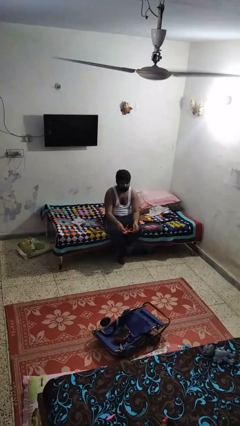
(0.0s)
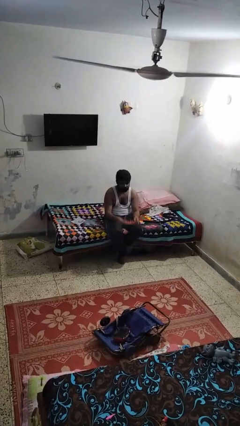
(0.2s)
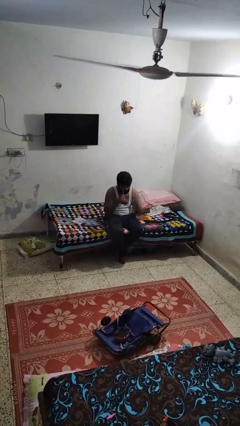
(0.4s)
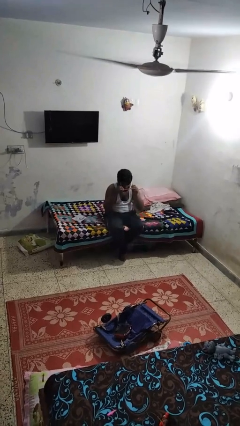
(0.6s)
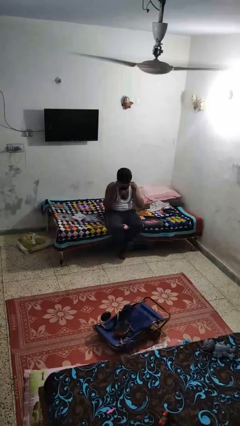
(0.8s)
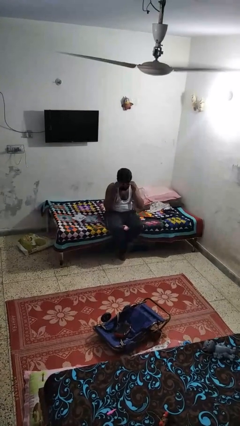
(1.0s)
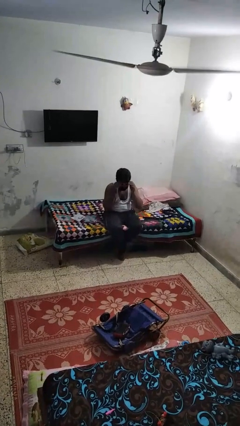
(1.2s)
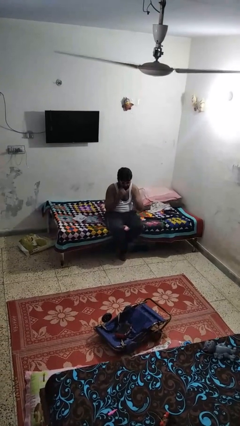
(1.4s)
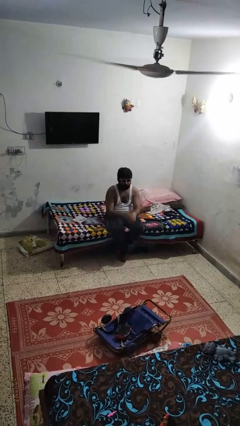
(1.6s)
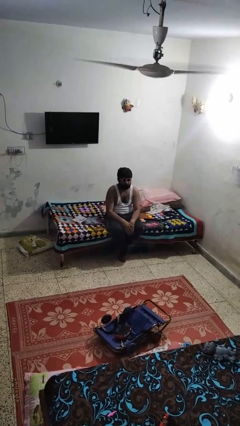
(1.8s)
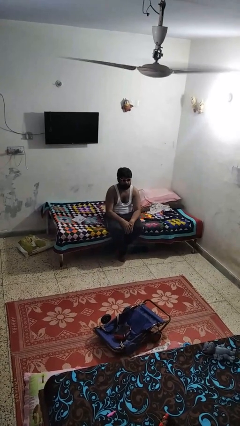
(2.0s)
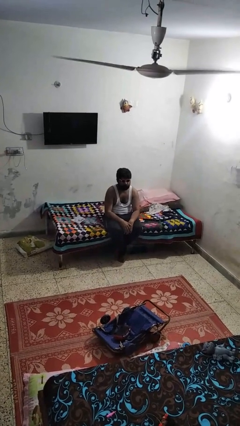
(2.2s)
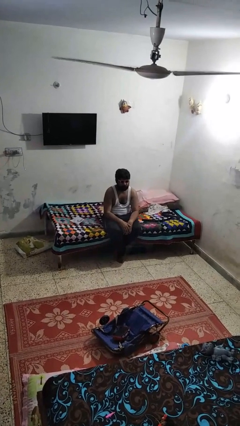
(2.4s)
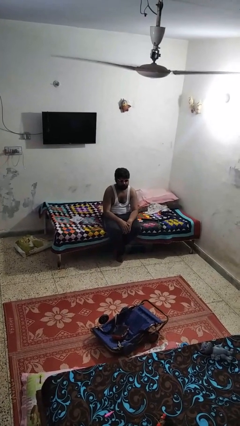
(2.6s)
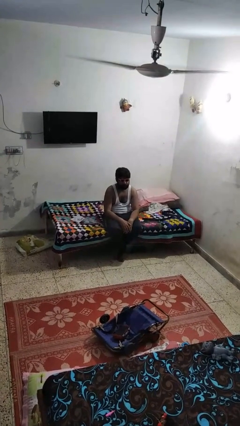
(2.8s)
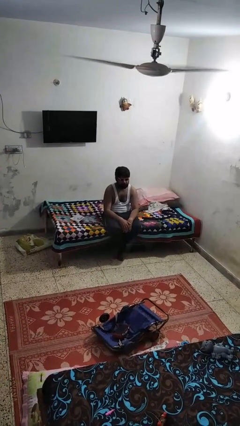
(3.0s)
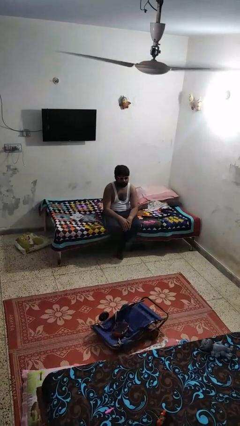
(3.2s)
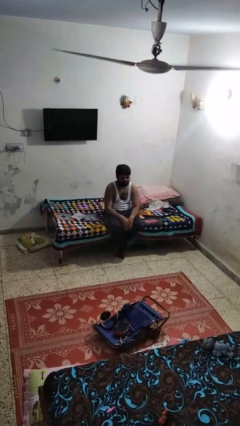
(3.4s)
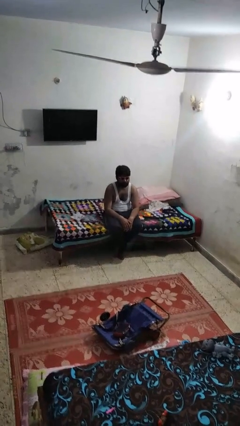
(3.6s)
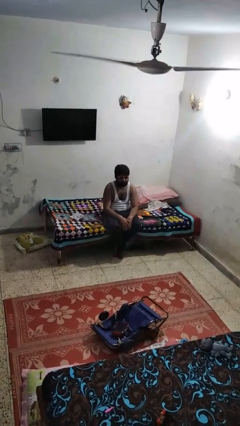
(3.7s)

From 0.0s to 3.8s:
person puts on sunglasses

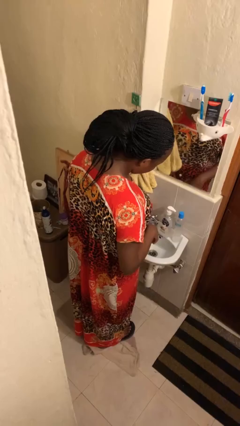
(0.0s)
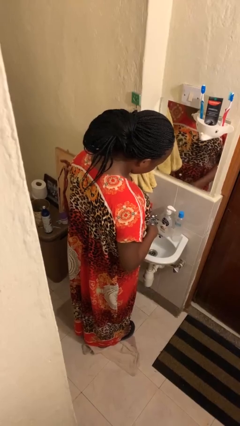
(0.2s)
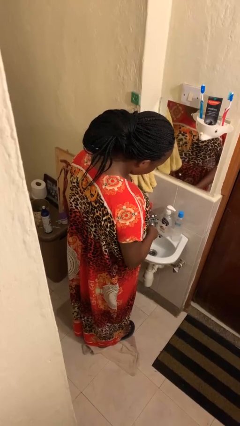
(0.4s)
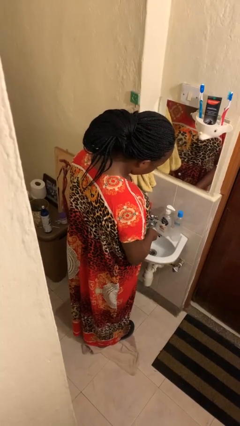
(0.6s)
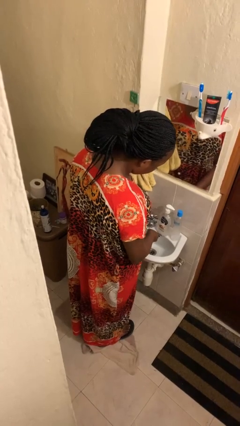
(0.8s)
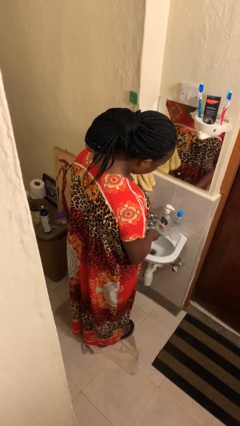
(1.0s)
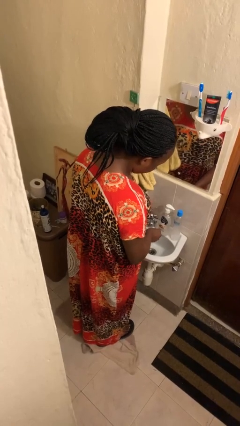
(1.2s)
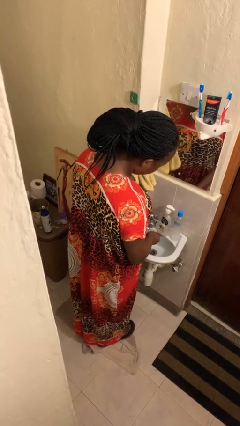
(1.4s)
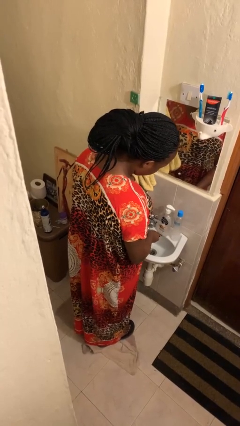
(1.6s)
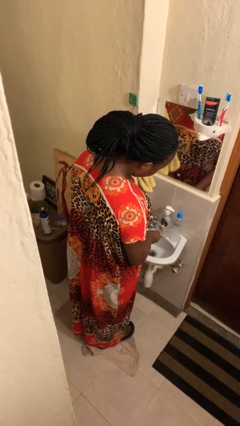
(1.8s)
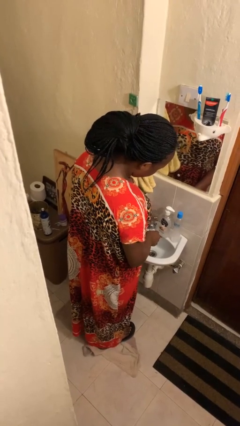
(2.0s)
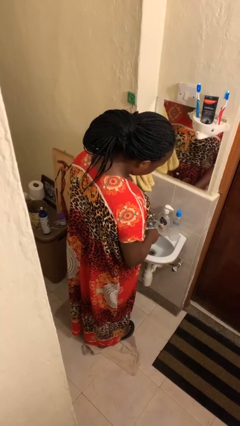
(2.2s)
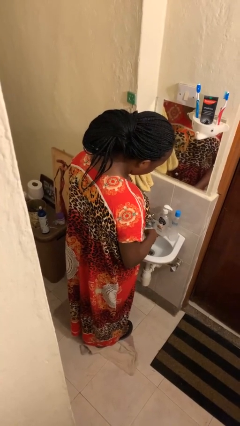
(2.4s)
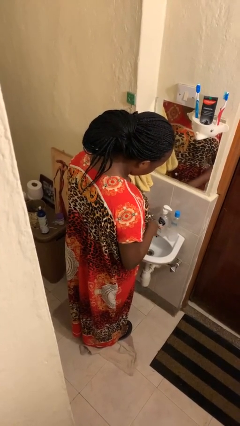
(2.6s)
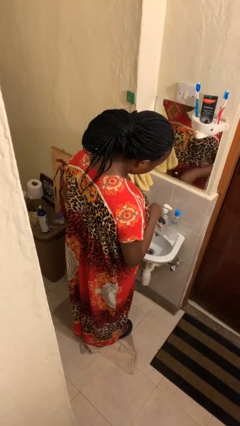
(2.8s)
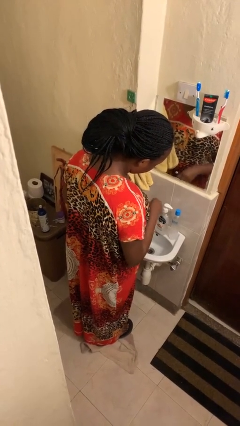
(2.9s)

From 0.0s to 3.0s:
person washes hands

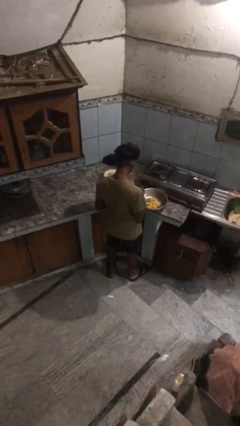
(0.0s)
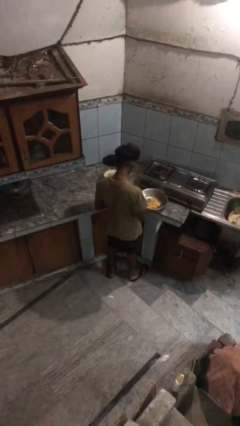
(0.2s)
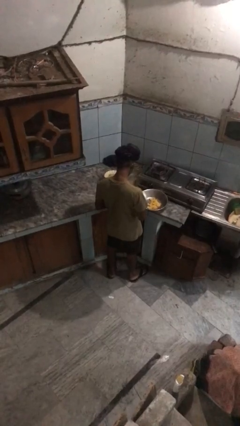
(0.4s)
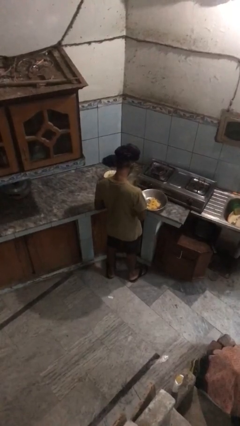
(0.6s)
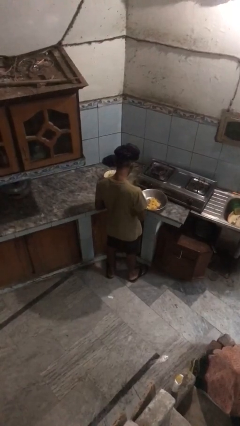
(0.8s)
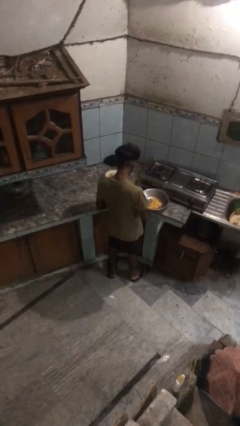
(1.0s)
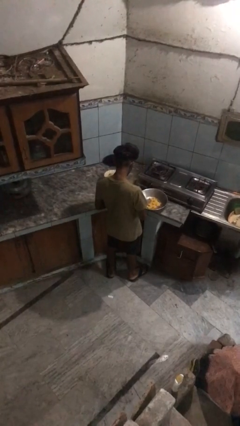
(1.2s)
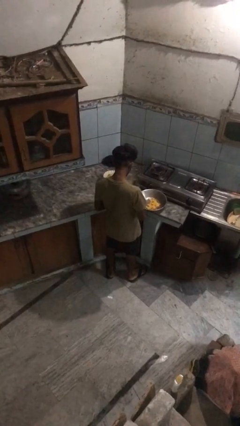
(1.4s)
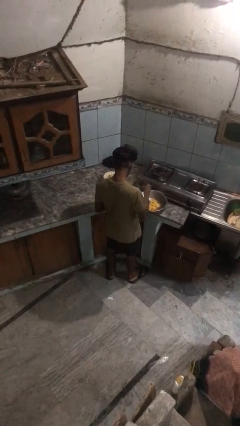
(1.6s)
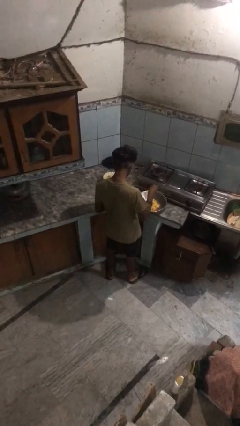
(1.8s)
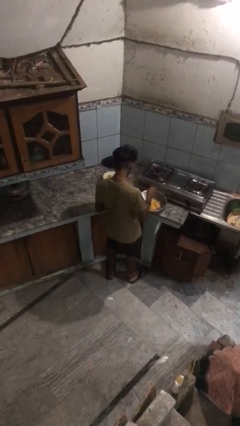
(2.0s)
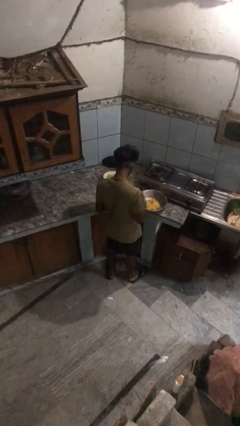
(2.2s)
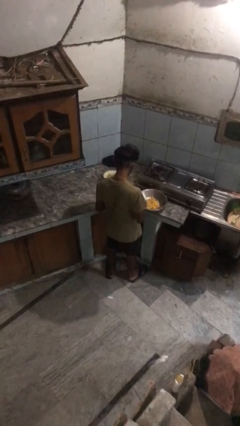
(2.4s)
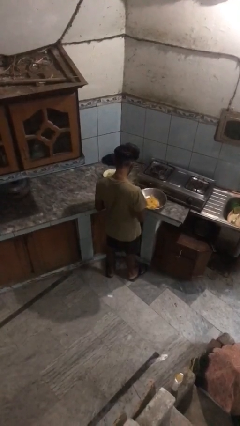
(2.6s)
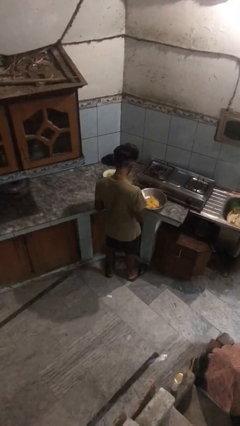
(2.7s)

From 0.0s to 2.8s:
person pours into bowl

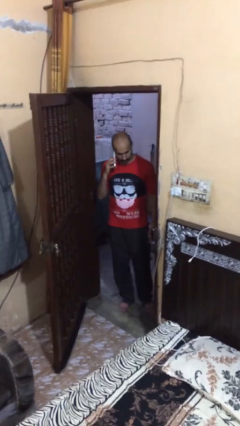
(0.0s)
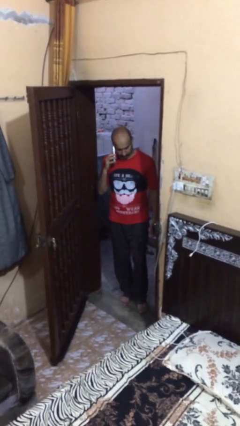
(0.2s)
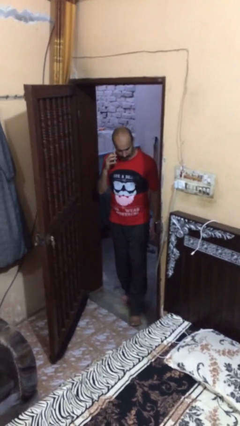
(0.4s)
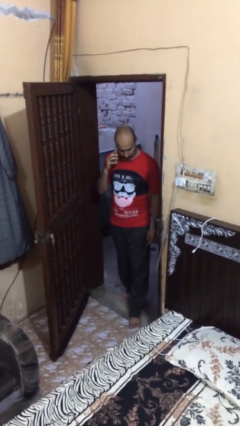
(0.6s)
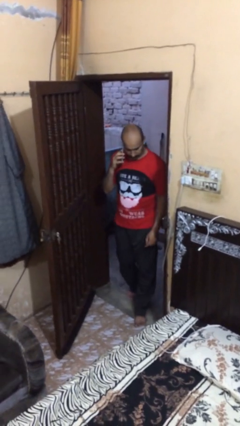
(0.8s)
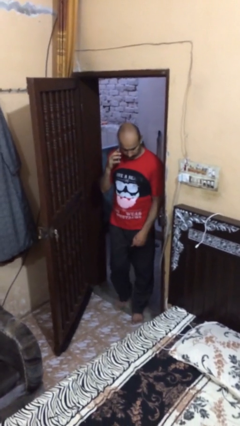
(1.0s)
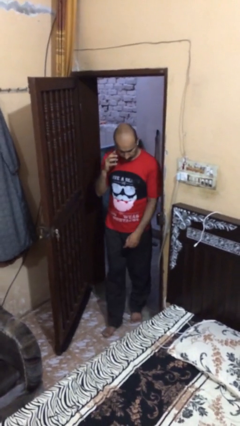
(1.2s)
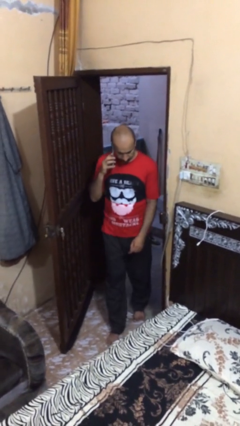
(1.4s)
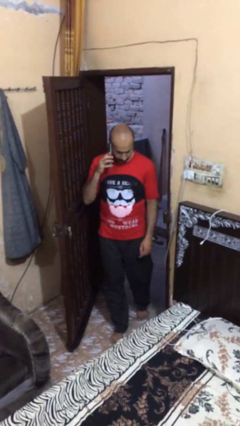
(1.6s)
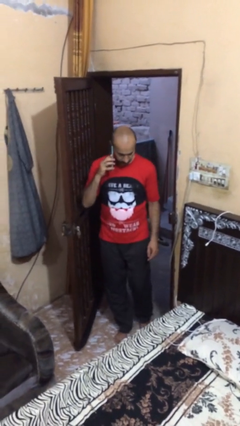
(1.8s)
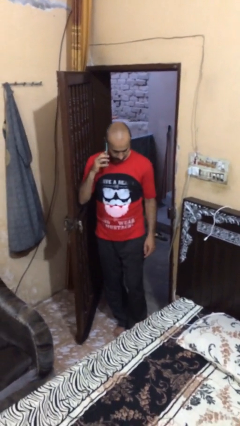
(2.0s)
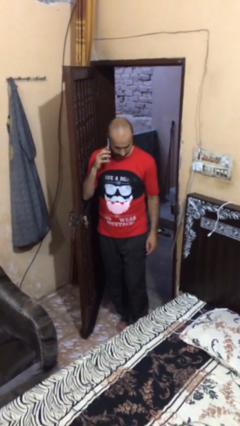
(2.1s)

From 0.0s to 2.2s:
person enters scene through structure

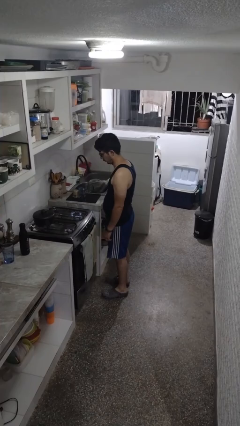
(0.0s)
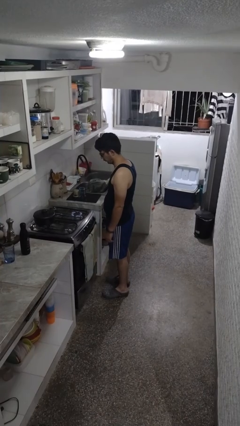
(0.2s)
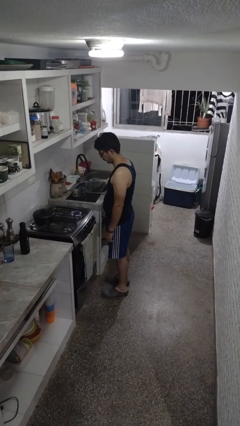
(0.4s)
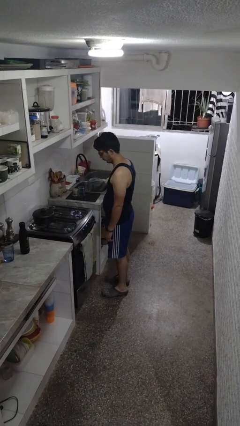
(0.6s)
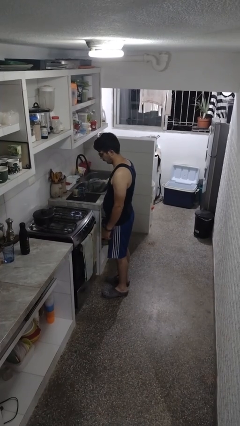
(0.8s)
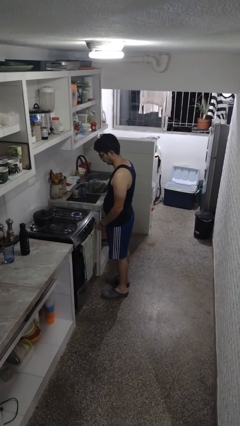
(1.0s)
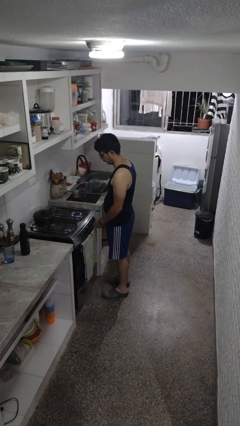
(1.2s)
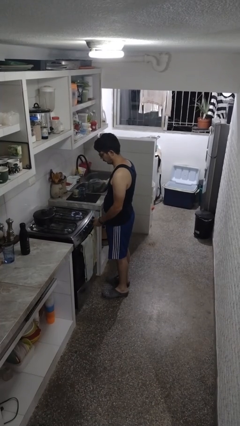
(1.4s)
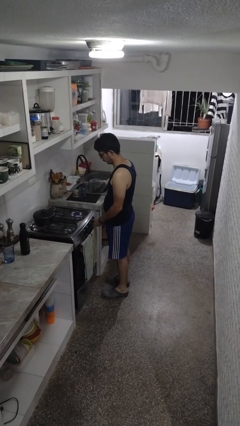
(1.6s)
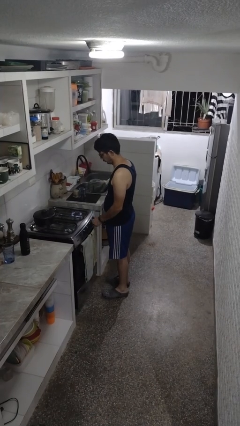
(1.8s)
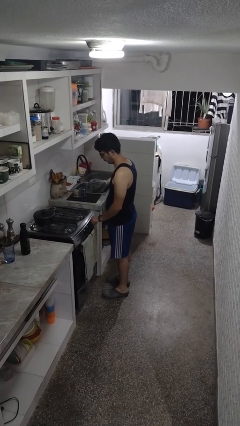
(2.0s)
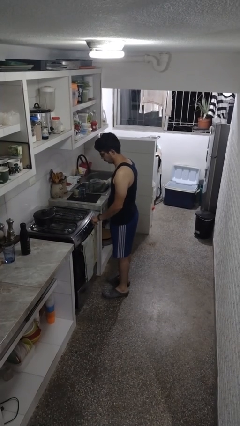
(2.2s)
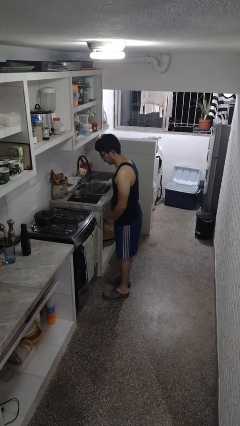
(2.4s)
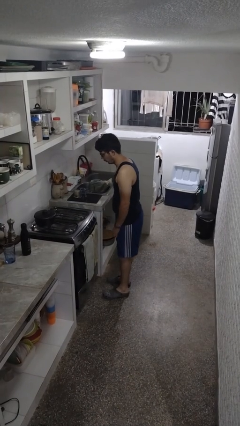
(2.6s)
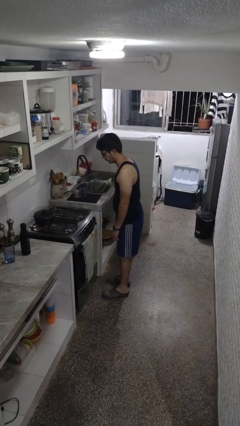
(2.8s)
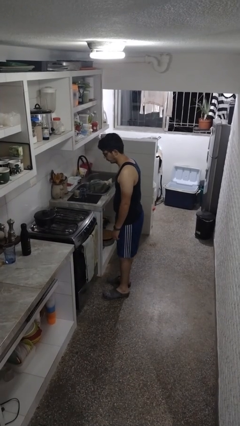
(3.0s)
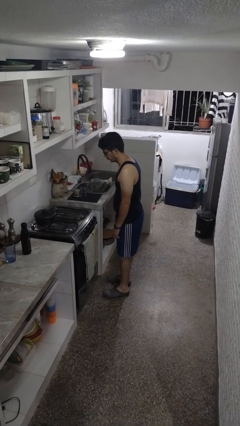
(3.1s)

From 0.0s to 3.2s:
person turns off stovetop

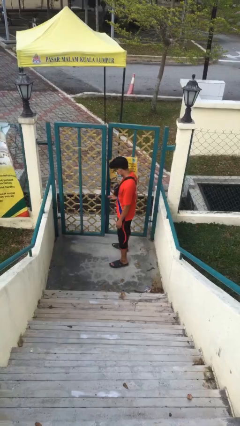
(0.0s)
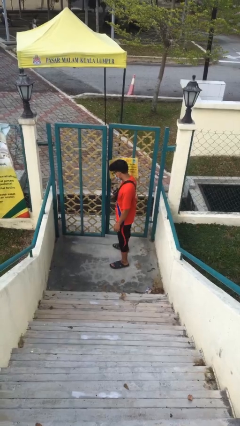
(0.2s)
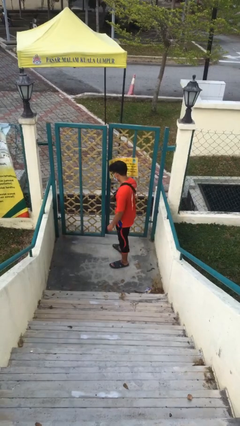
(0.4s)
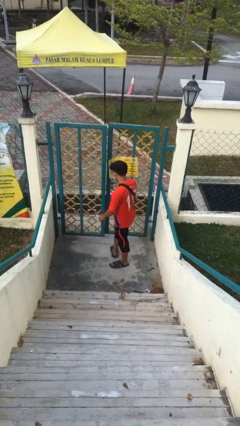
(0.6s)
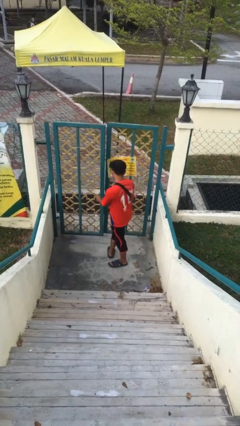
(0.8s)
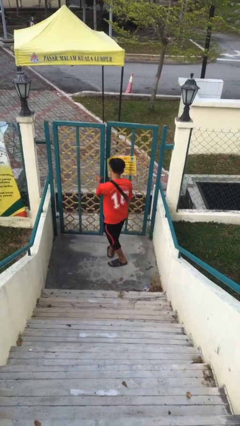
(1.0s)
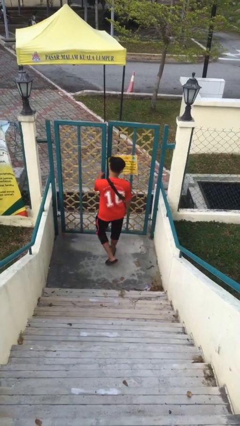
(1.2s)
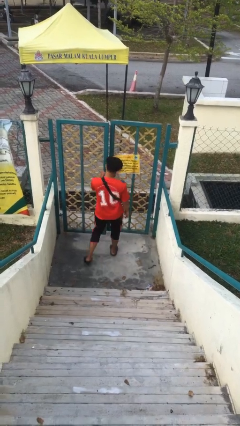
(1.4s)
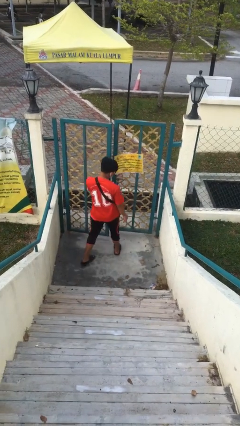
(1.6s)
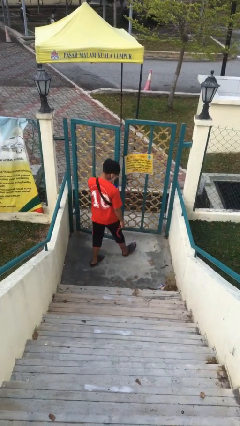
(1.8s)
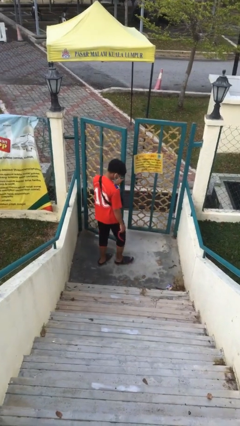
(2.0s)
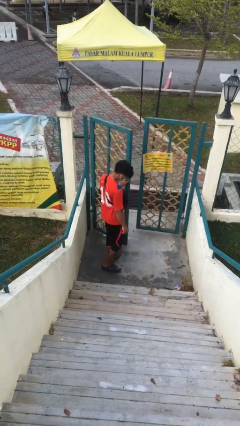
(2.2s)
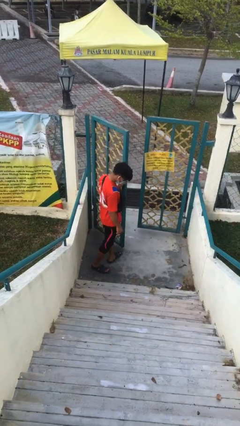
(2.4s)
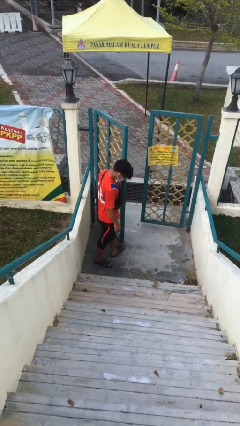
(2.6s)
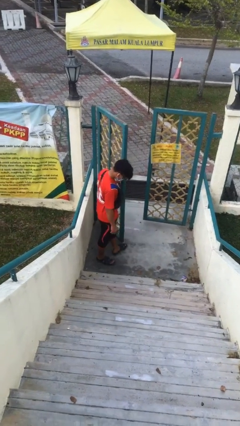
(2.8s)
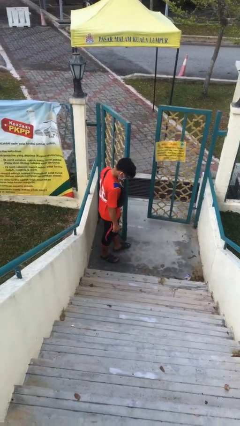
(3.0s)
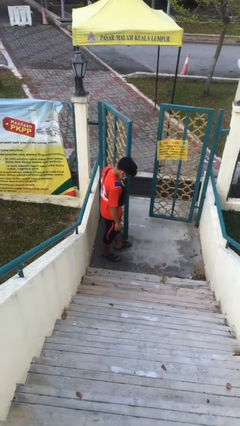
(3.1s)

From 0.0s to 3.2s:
person opens facility door
